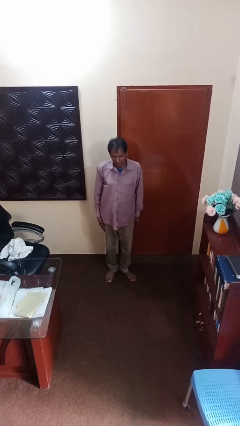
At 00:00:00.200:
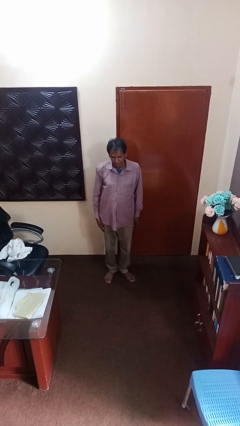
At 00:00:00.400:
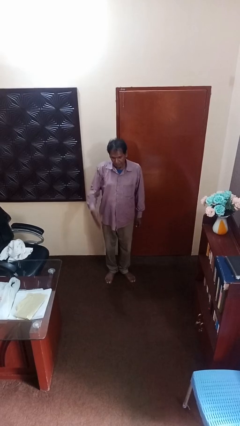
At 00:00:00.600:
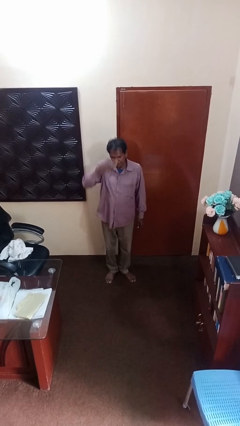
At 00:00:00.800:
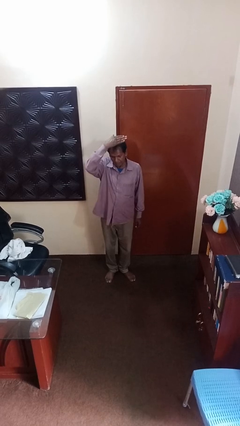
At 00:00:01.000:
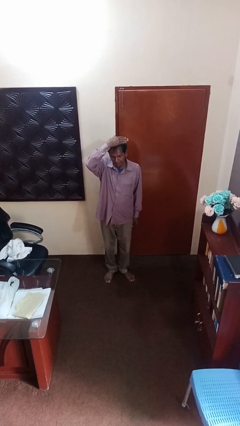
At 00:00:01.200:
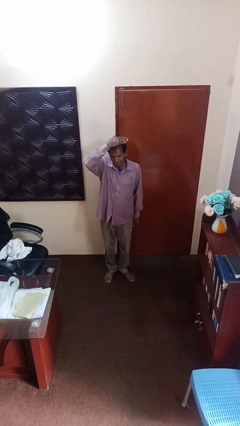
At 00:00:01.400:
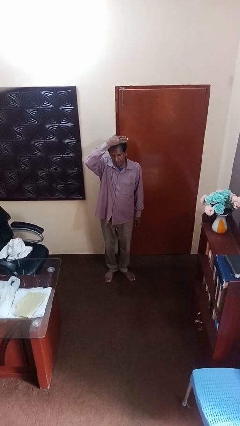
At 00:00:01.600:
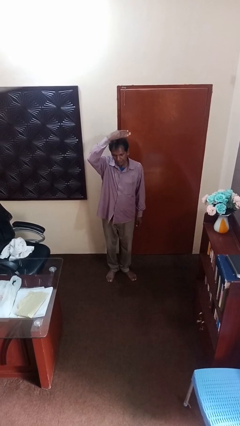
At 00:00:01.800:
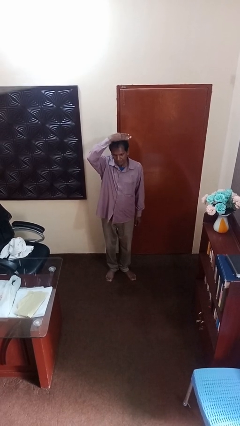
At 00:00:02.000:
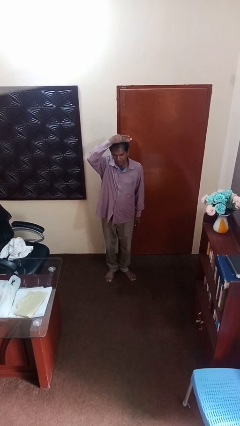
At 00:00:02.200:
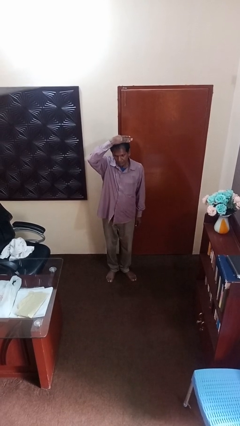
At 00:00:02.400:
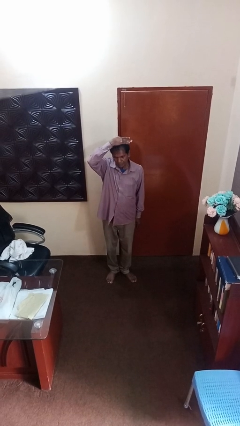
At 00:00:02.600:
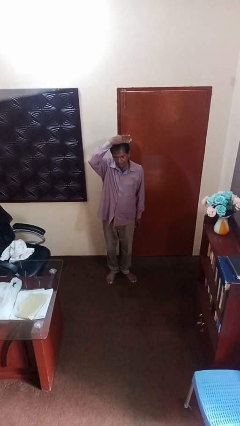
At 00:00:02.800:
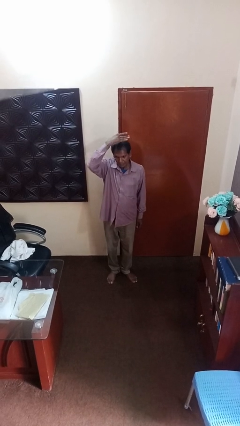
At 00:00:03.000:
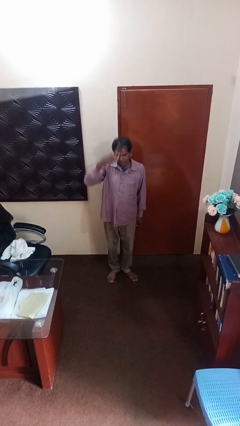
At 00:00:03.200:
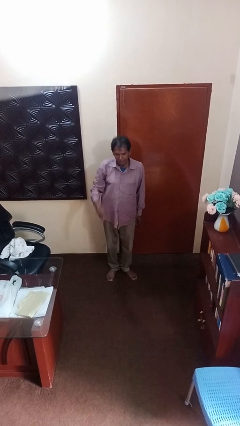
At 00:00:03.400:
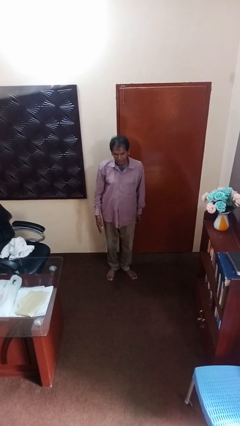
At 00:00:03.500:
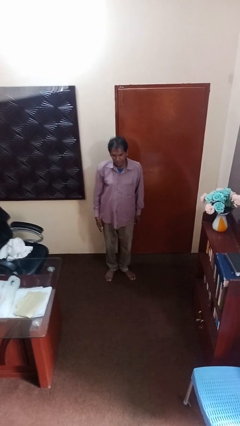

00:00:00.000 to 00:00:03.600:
person pats head

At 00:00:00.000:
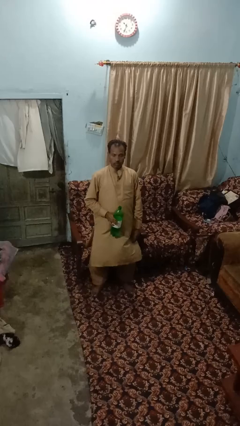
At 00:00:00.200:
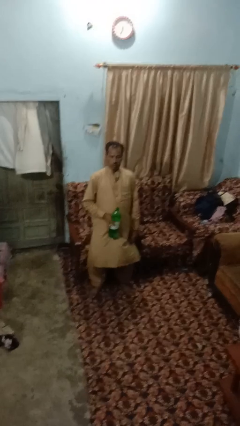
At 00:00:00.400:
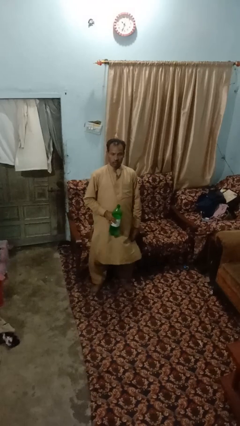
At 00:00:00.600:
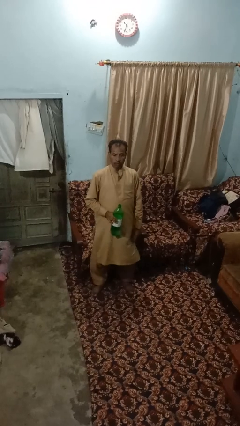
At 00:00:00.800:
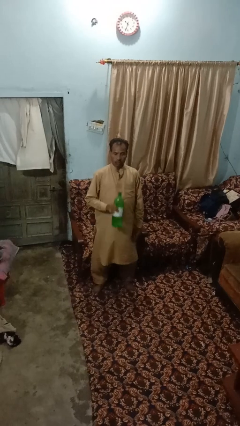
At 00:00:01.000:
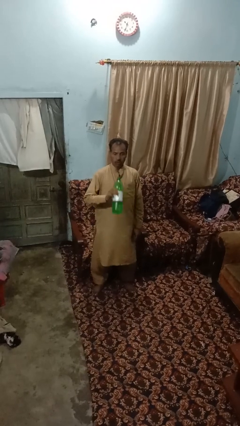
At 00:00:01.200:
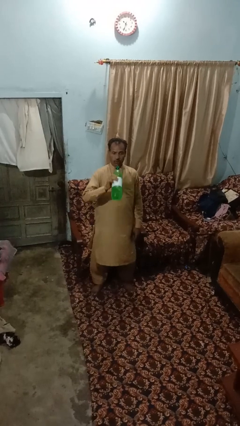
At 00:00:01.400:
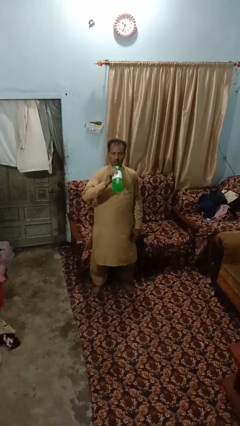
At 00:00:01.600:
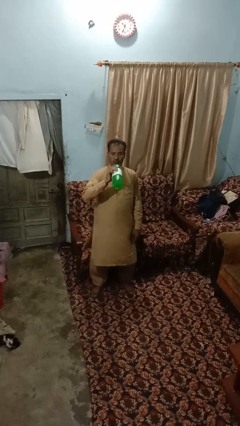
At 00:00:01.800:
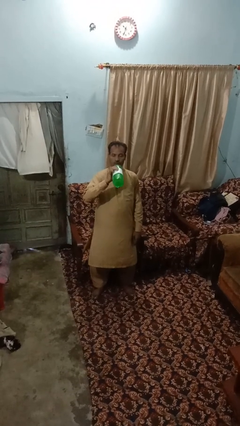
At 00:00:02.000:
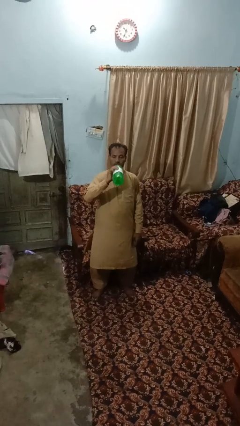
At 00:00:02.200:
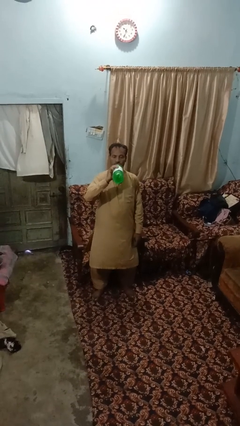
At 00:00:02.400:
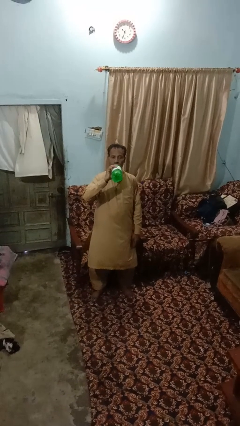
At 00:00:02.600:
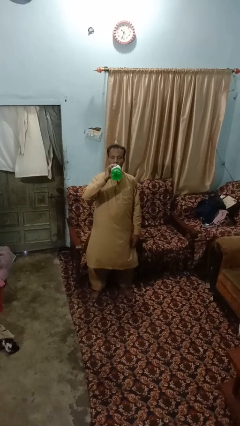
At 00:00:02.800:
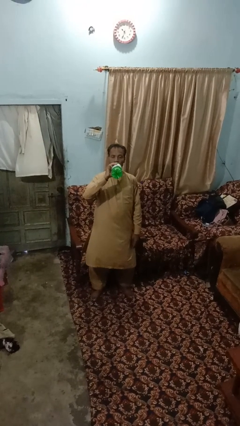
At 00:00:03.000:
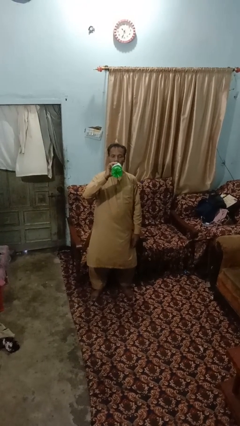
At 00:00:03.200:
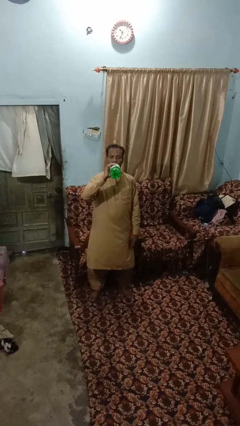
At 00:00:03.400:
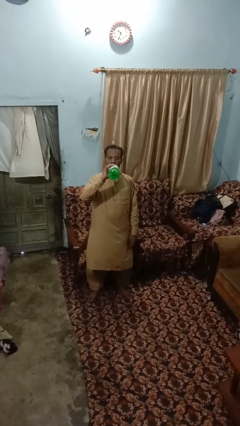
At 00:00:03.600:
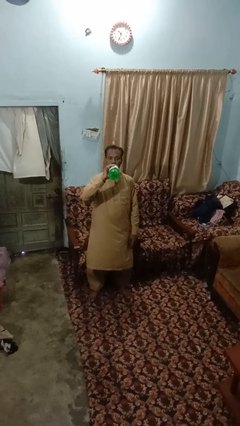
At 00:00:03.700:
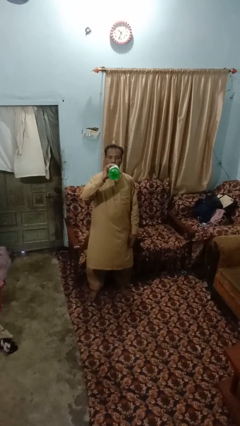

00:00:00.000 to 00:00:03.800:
person drinks from bottle

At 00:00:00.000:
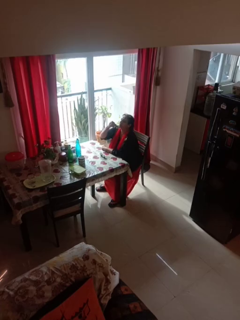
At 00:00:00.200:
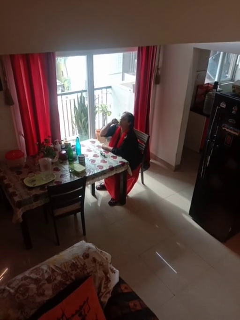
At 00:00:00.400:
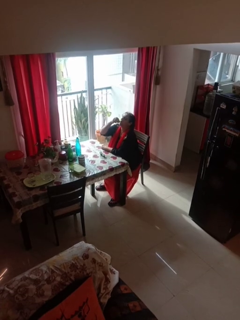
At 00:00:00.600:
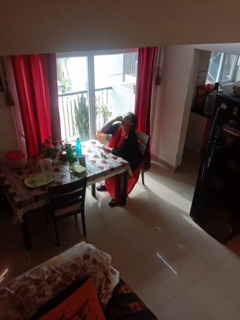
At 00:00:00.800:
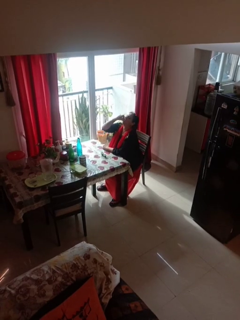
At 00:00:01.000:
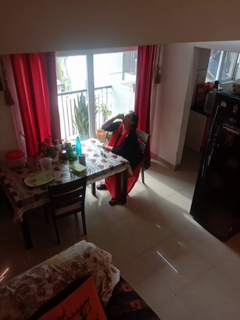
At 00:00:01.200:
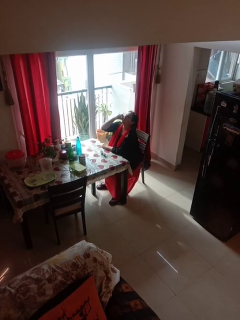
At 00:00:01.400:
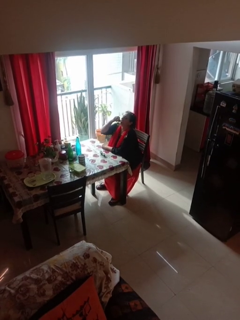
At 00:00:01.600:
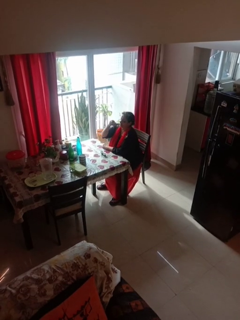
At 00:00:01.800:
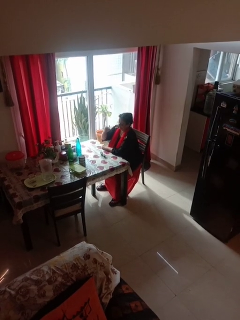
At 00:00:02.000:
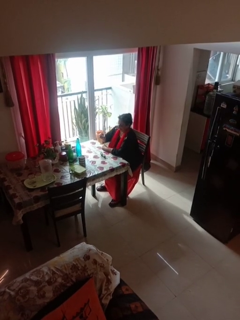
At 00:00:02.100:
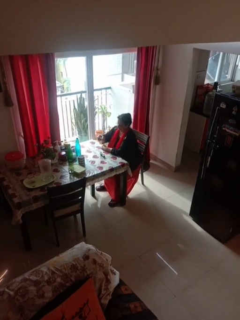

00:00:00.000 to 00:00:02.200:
person drinks from shotglass

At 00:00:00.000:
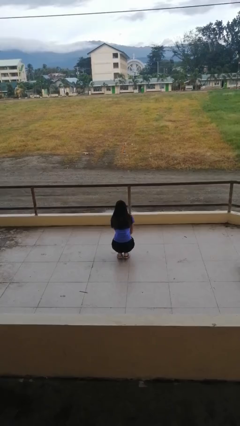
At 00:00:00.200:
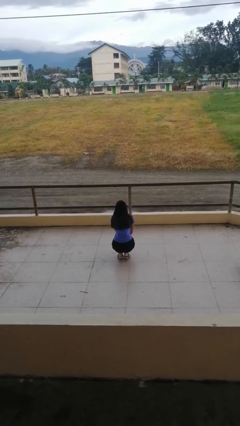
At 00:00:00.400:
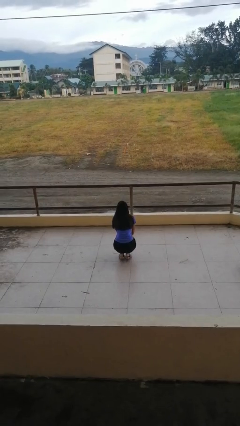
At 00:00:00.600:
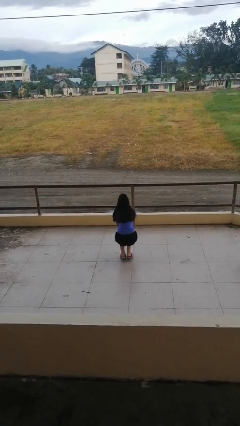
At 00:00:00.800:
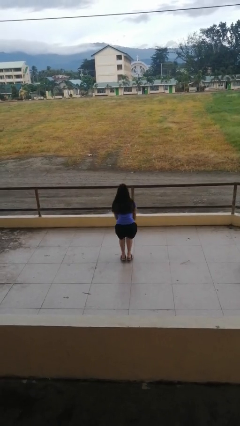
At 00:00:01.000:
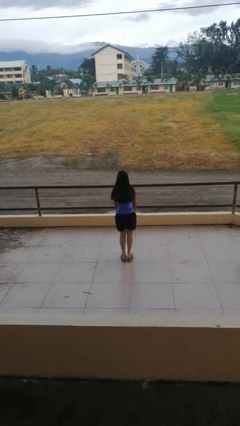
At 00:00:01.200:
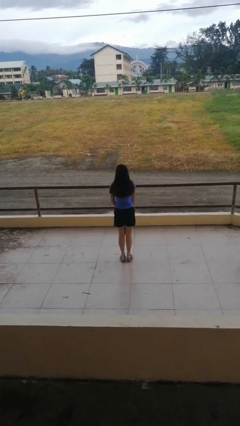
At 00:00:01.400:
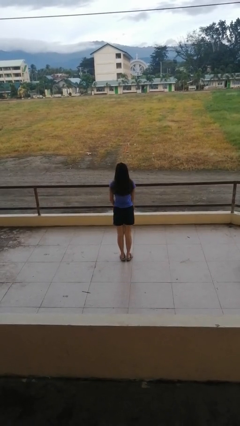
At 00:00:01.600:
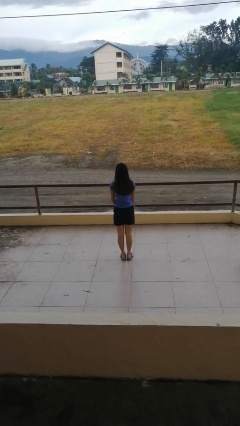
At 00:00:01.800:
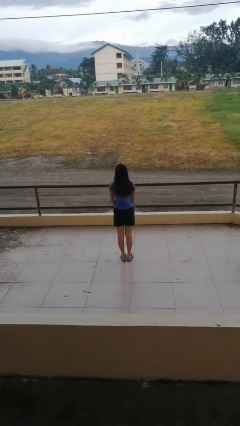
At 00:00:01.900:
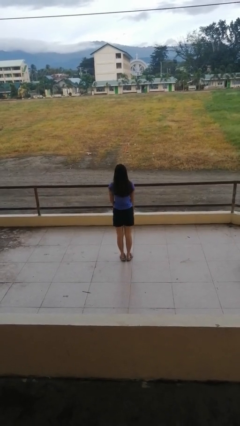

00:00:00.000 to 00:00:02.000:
person stands up

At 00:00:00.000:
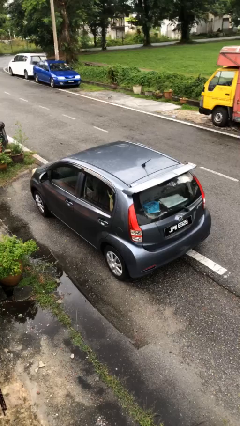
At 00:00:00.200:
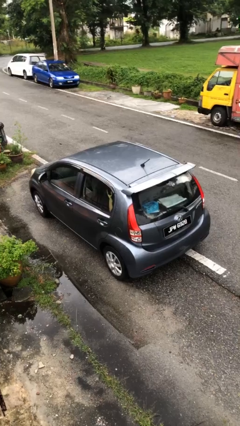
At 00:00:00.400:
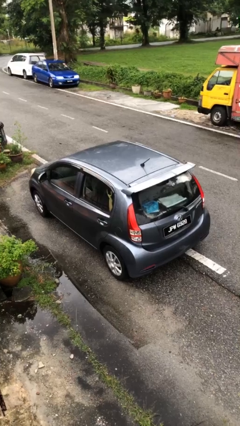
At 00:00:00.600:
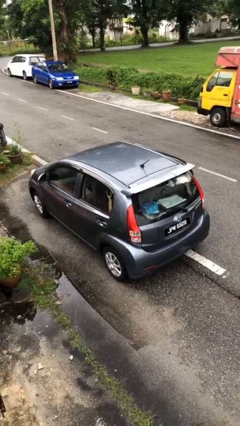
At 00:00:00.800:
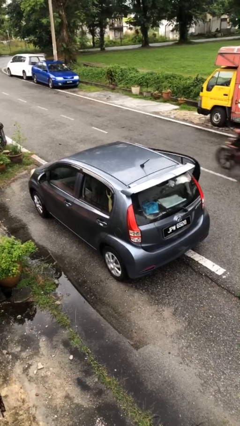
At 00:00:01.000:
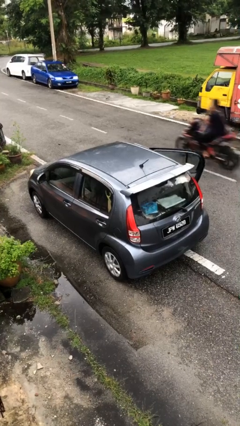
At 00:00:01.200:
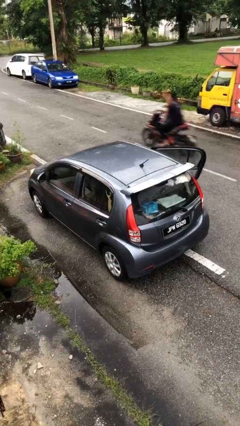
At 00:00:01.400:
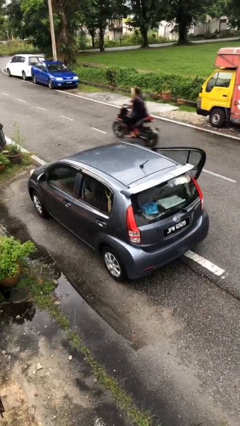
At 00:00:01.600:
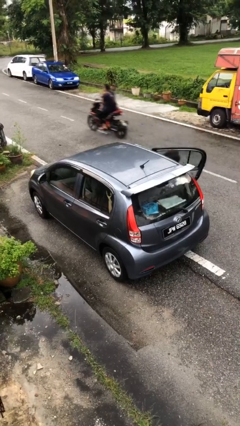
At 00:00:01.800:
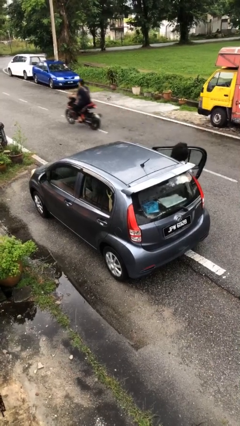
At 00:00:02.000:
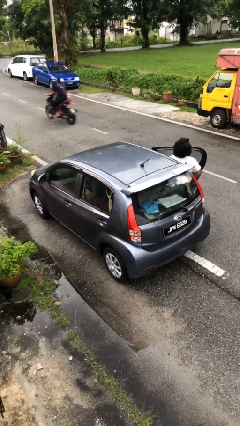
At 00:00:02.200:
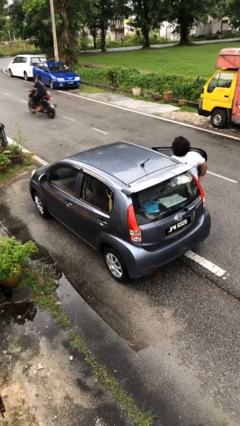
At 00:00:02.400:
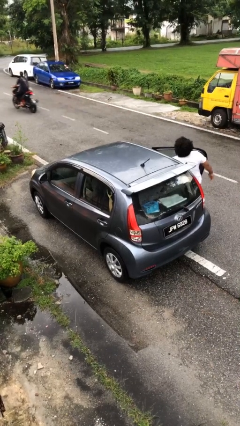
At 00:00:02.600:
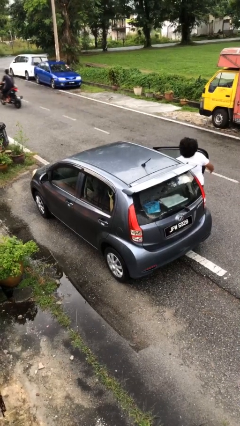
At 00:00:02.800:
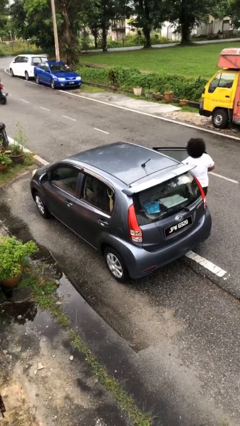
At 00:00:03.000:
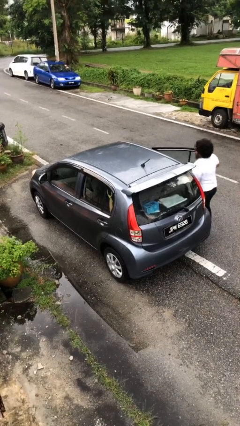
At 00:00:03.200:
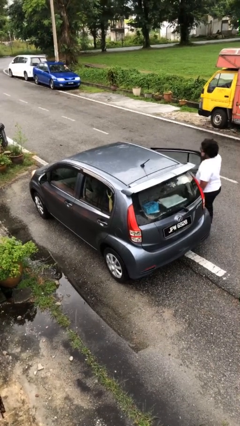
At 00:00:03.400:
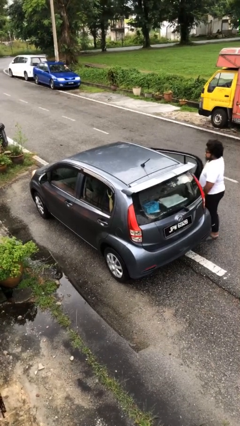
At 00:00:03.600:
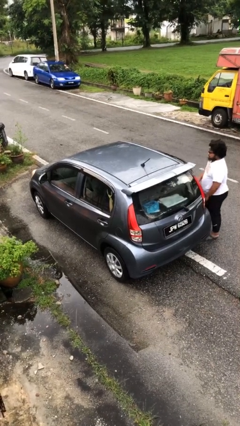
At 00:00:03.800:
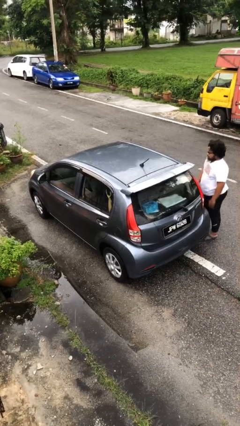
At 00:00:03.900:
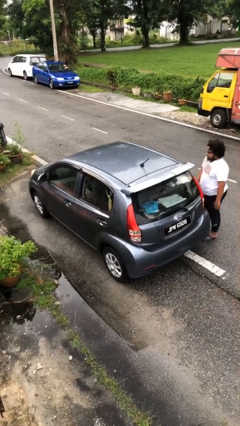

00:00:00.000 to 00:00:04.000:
car drops off person

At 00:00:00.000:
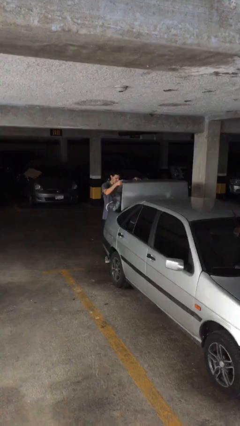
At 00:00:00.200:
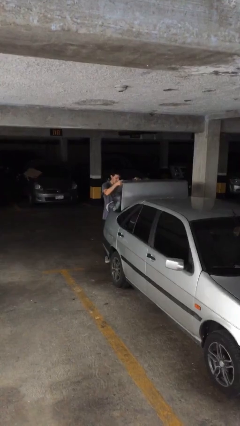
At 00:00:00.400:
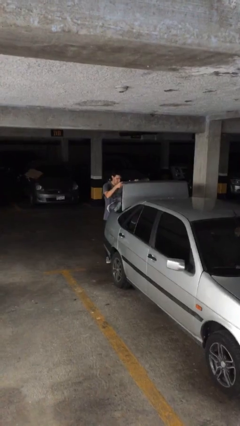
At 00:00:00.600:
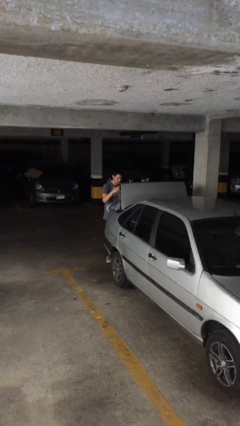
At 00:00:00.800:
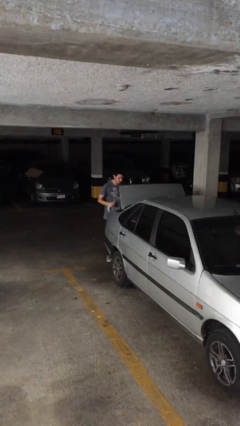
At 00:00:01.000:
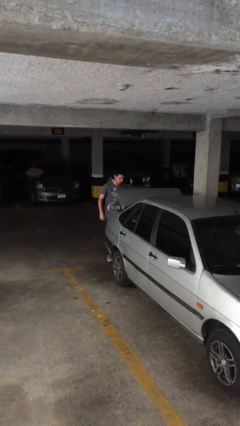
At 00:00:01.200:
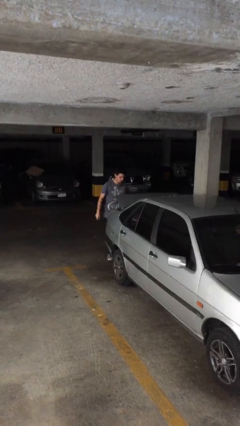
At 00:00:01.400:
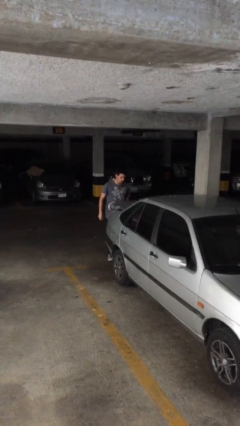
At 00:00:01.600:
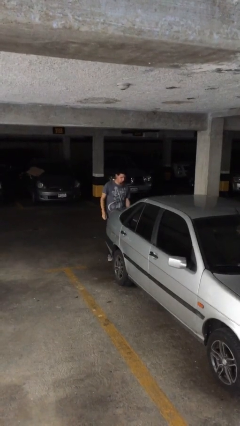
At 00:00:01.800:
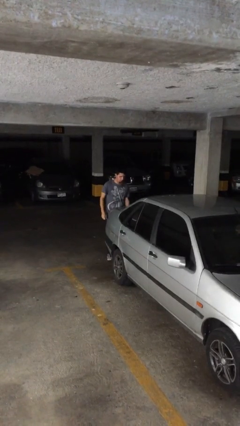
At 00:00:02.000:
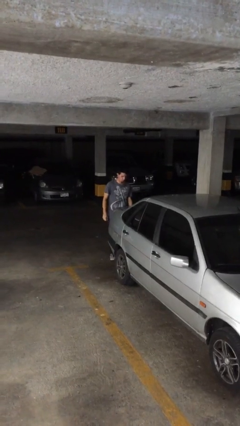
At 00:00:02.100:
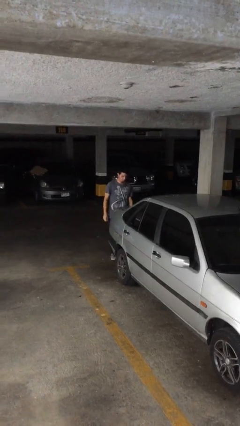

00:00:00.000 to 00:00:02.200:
person closes car trunk
